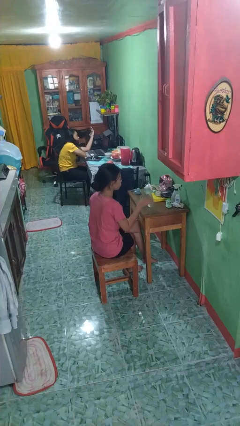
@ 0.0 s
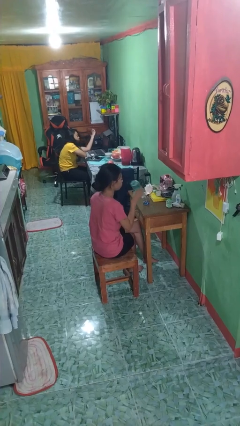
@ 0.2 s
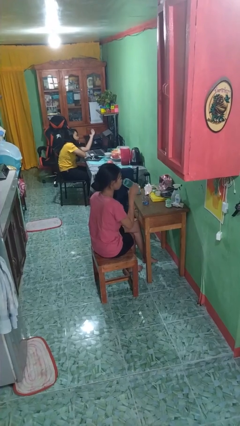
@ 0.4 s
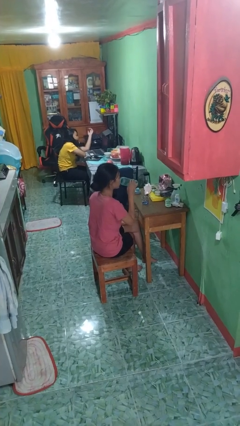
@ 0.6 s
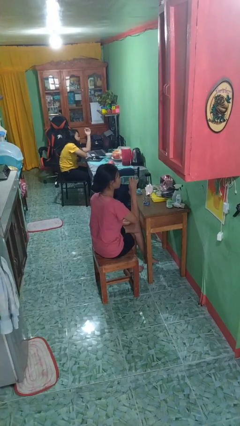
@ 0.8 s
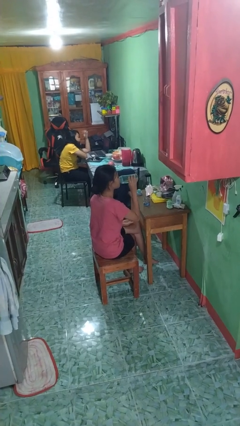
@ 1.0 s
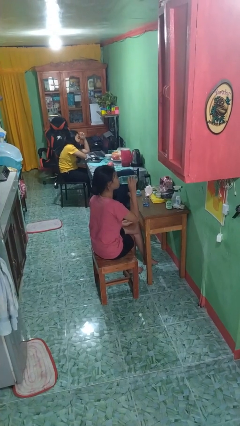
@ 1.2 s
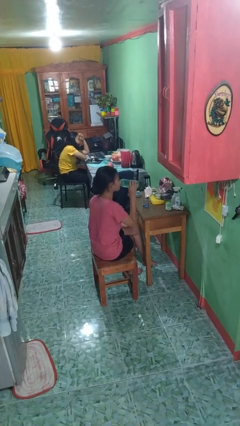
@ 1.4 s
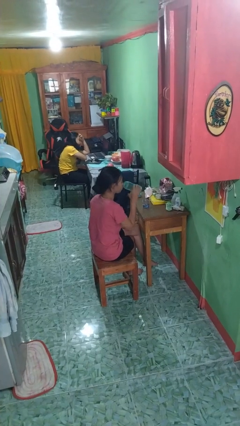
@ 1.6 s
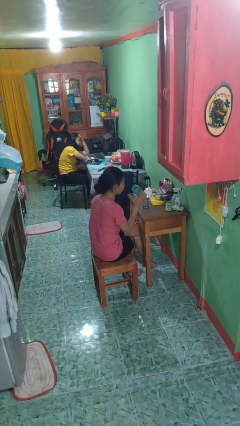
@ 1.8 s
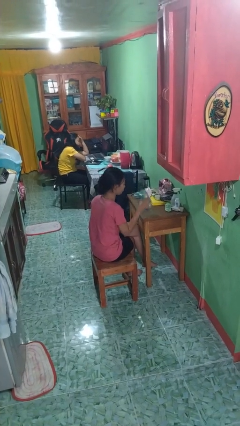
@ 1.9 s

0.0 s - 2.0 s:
person drinks from cup

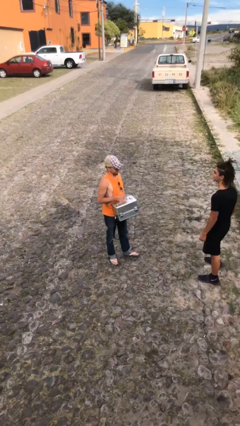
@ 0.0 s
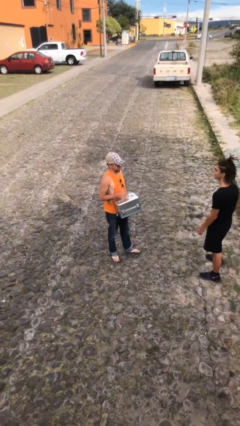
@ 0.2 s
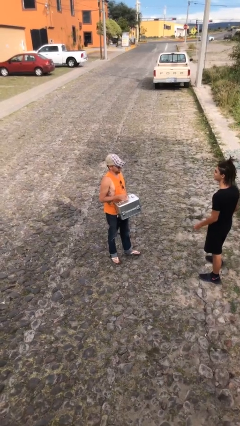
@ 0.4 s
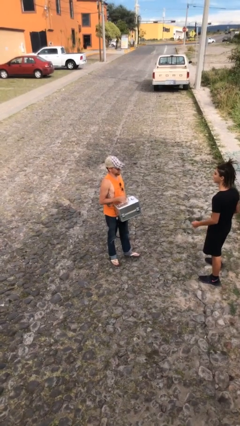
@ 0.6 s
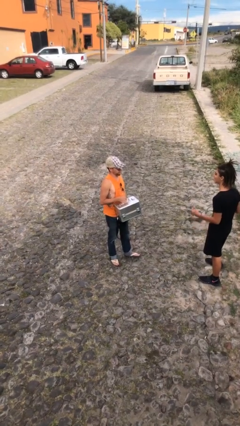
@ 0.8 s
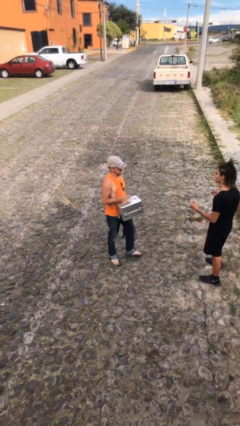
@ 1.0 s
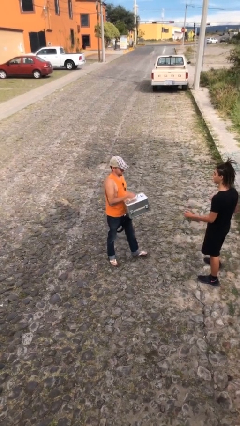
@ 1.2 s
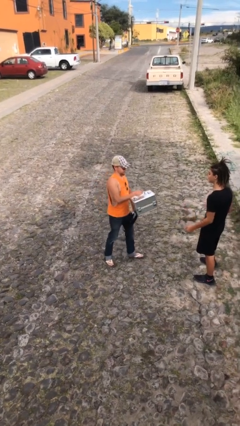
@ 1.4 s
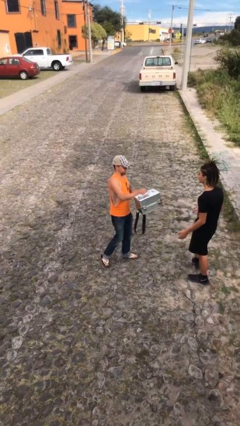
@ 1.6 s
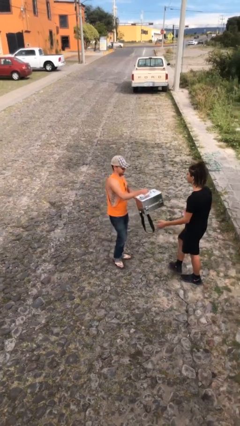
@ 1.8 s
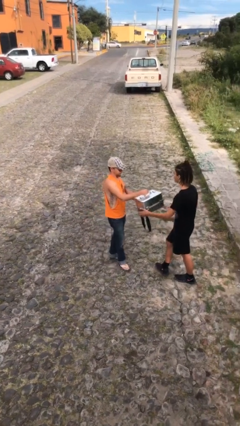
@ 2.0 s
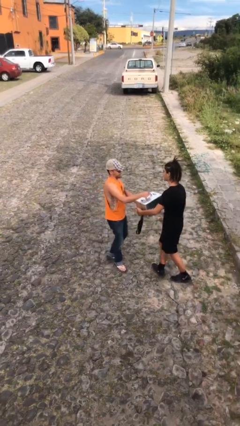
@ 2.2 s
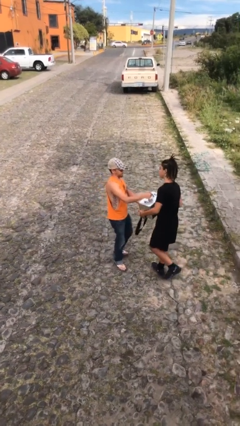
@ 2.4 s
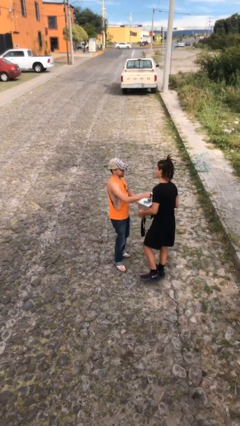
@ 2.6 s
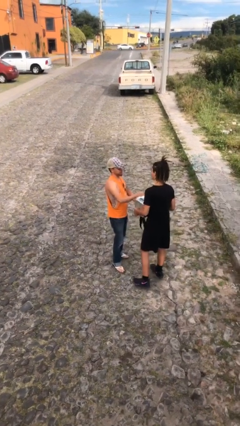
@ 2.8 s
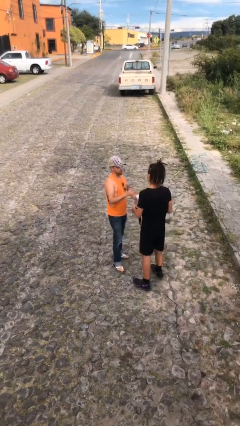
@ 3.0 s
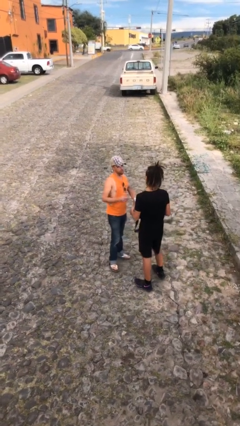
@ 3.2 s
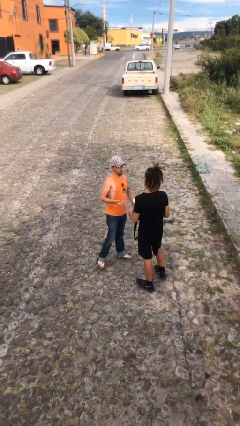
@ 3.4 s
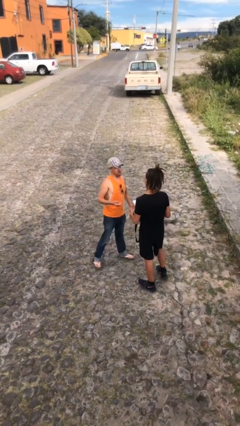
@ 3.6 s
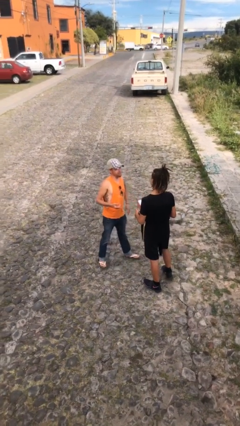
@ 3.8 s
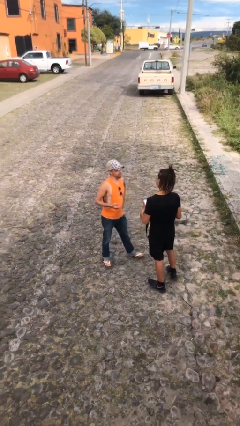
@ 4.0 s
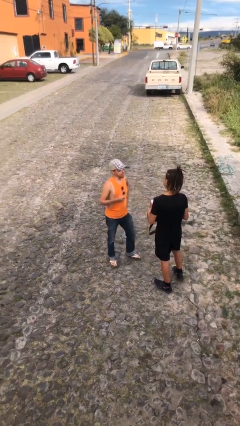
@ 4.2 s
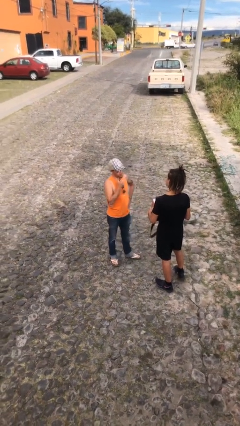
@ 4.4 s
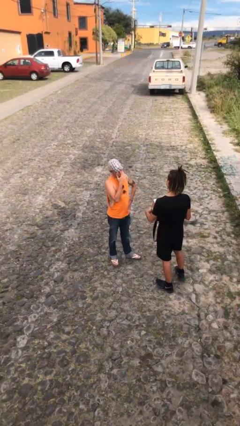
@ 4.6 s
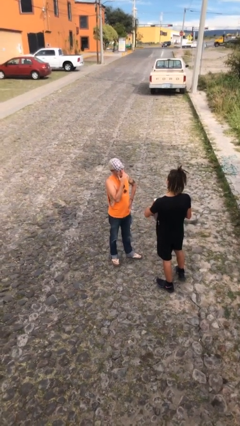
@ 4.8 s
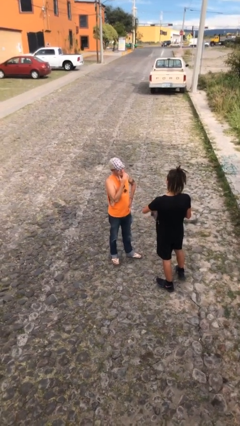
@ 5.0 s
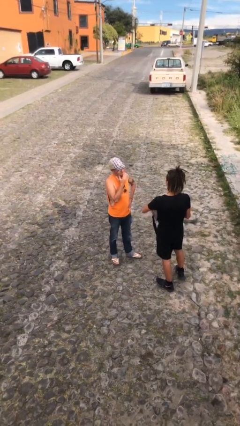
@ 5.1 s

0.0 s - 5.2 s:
person transfers object to person

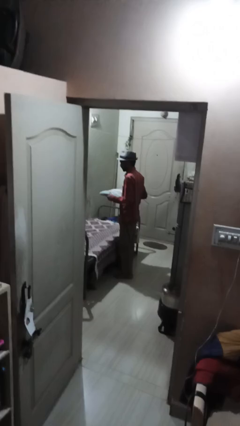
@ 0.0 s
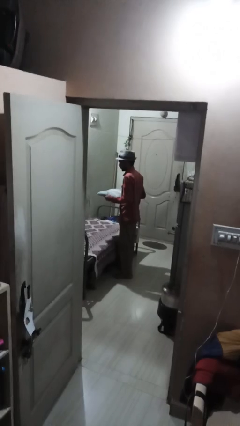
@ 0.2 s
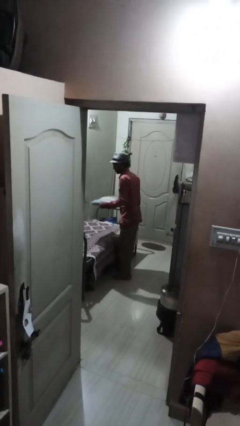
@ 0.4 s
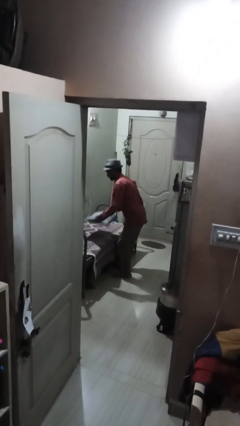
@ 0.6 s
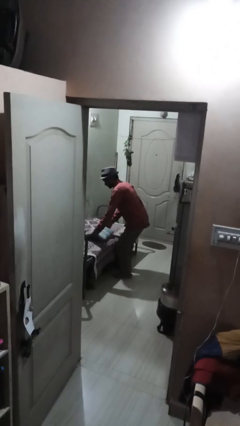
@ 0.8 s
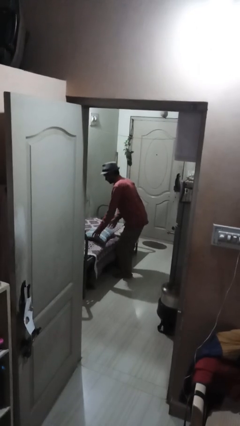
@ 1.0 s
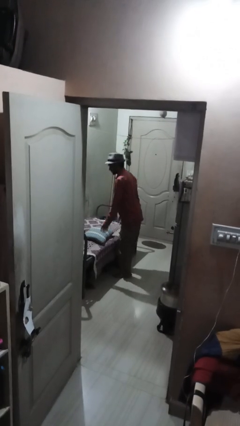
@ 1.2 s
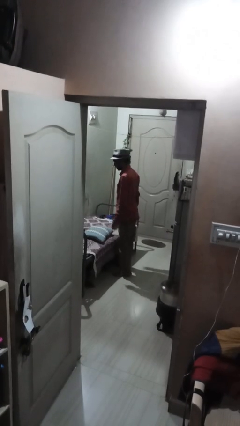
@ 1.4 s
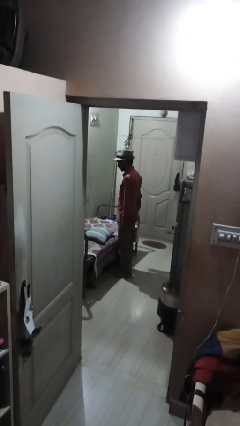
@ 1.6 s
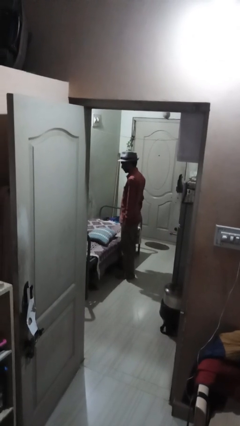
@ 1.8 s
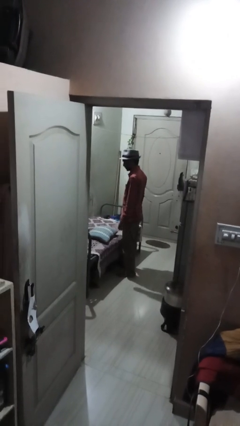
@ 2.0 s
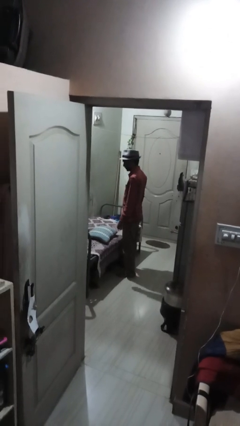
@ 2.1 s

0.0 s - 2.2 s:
person puts down object on bed

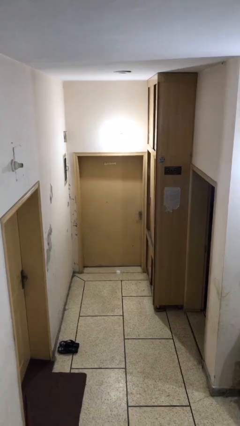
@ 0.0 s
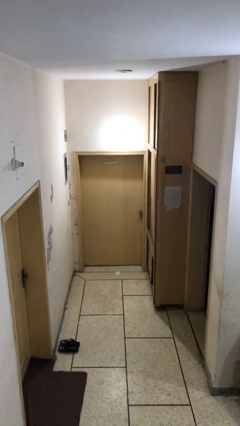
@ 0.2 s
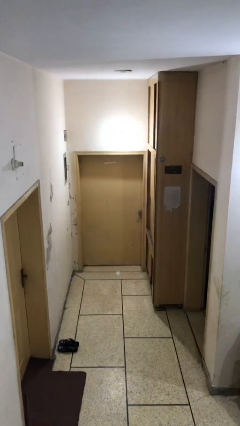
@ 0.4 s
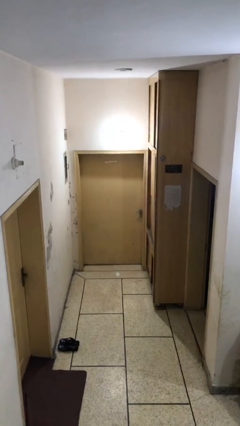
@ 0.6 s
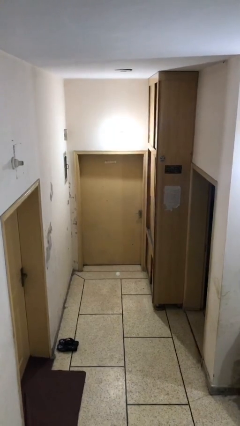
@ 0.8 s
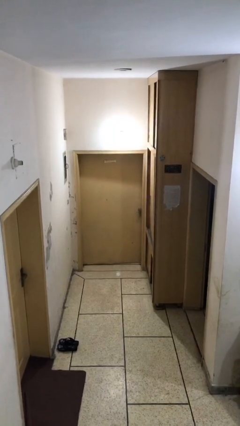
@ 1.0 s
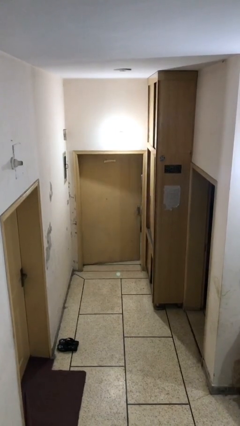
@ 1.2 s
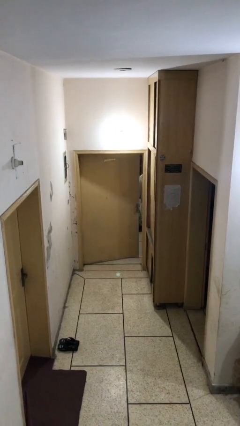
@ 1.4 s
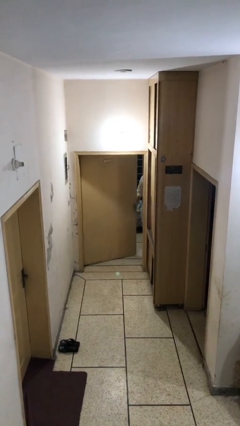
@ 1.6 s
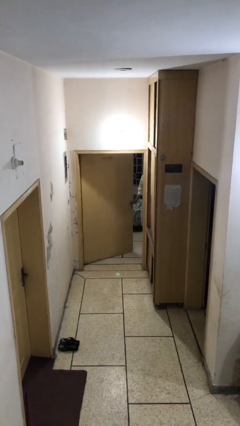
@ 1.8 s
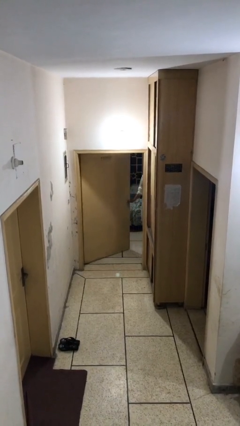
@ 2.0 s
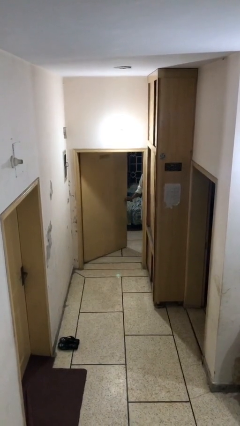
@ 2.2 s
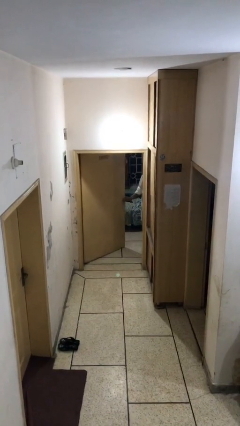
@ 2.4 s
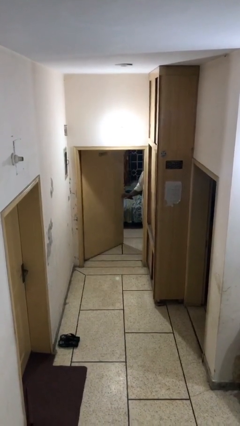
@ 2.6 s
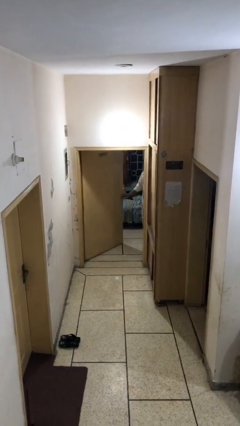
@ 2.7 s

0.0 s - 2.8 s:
person opens facility door

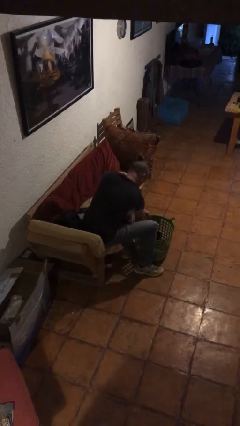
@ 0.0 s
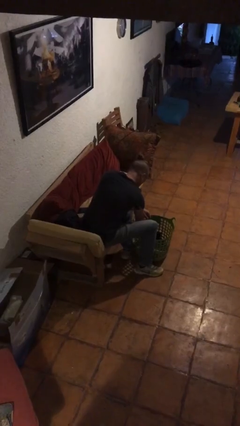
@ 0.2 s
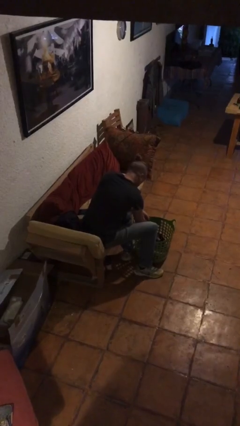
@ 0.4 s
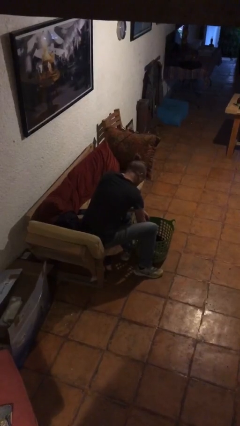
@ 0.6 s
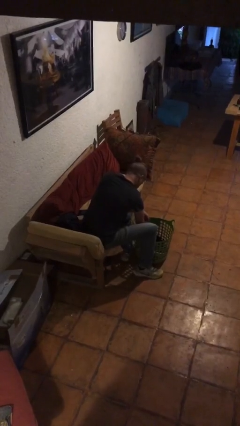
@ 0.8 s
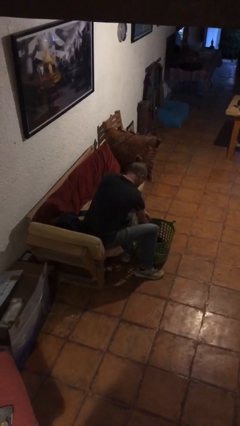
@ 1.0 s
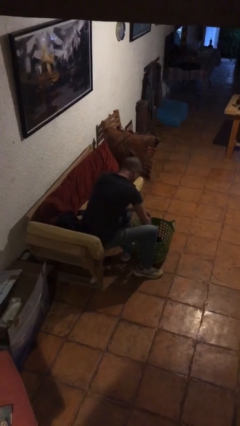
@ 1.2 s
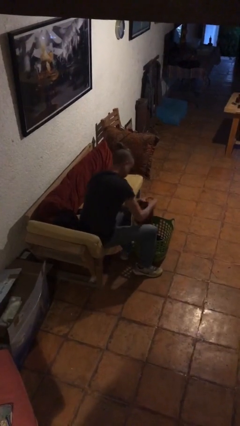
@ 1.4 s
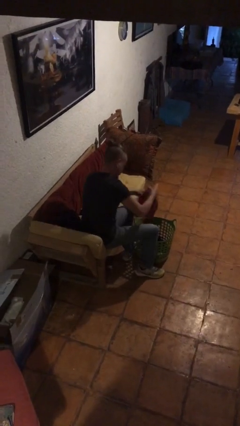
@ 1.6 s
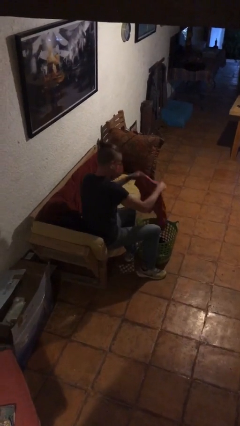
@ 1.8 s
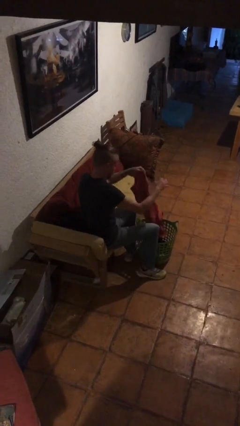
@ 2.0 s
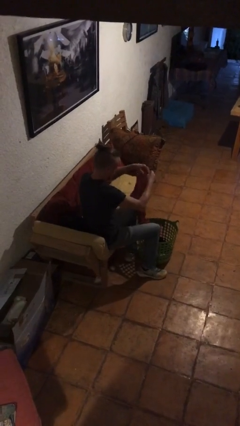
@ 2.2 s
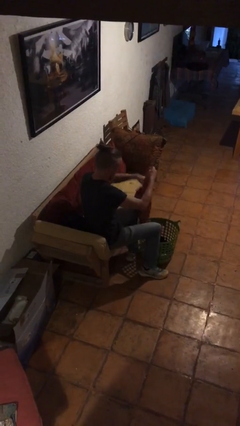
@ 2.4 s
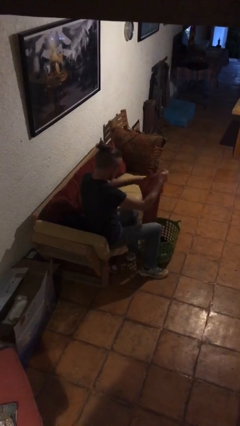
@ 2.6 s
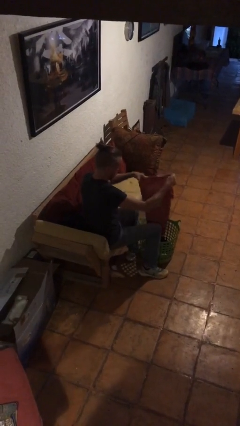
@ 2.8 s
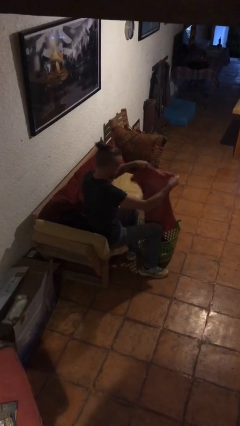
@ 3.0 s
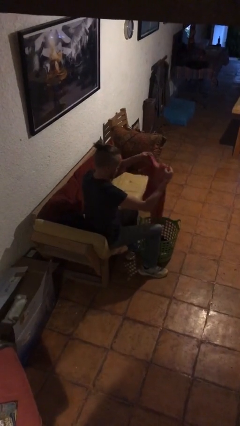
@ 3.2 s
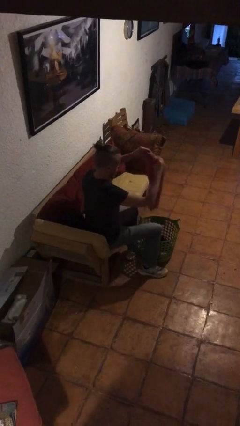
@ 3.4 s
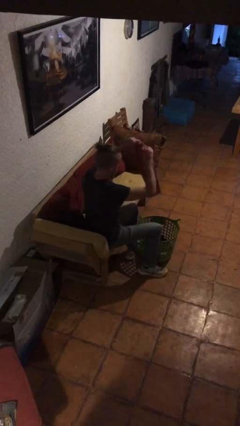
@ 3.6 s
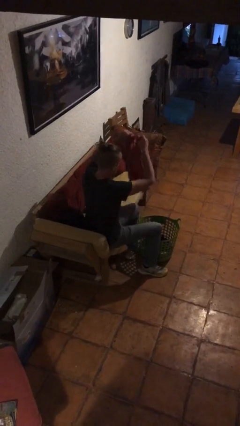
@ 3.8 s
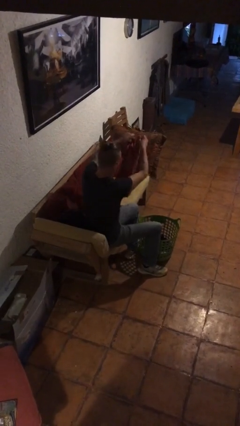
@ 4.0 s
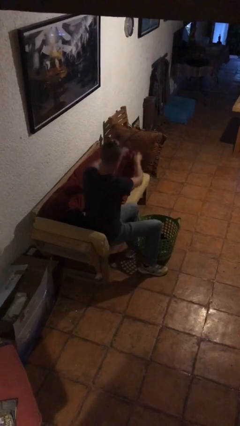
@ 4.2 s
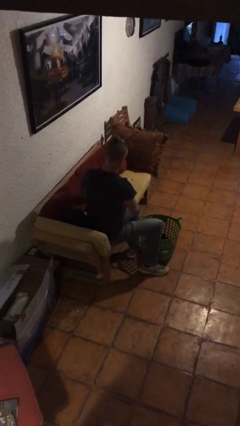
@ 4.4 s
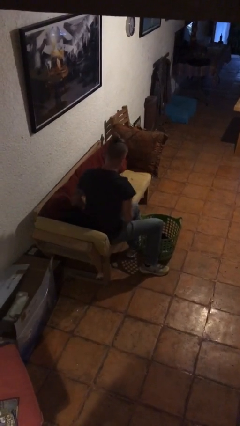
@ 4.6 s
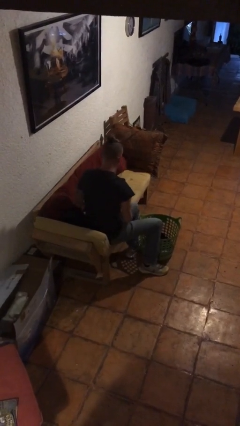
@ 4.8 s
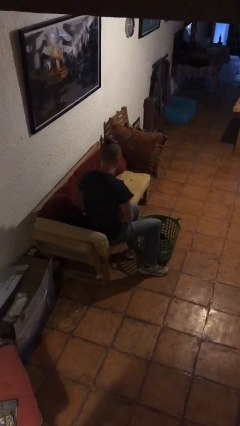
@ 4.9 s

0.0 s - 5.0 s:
person folds shirt
